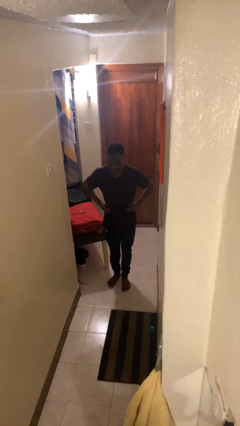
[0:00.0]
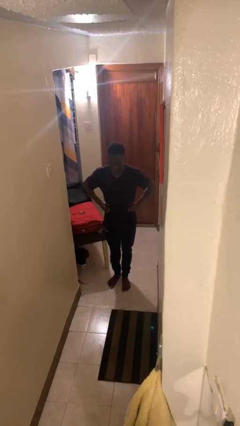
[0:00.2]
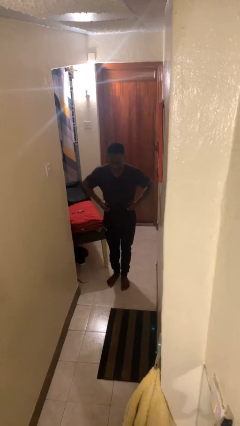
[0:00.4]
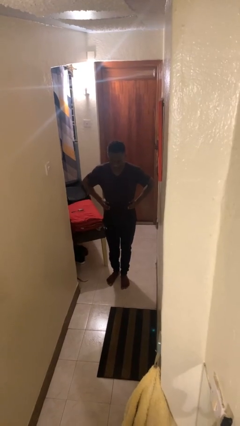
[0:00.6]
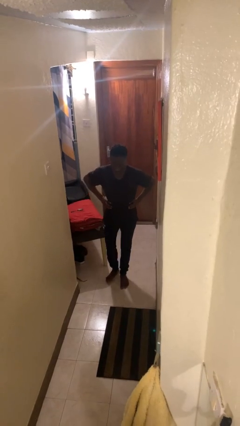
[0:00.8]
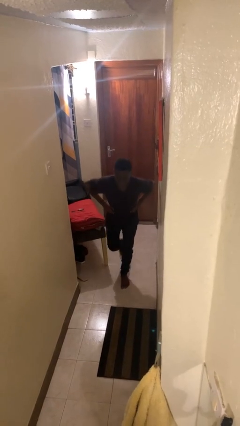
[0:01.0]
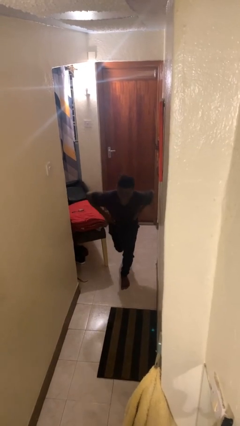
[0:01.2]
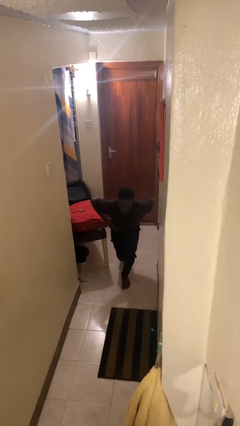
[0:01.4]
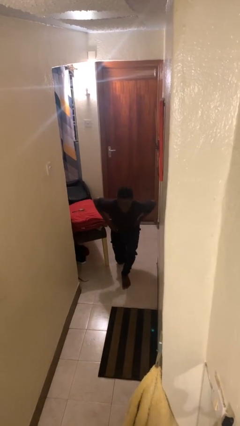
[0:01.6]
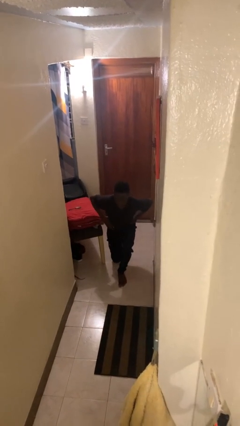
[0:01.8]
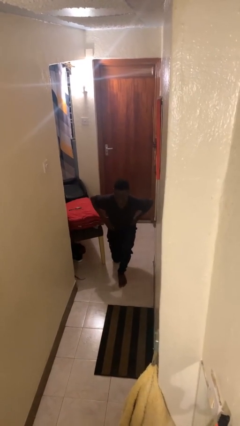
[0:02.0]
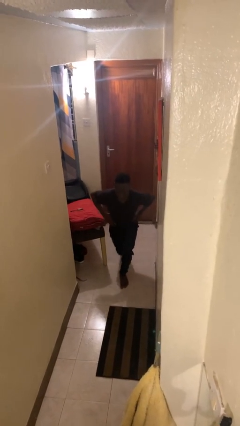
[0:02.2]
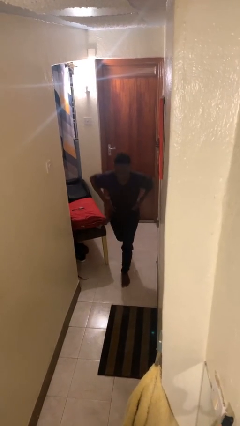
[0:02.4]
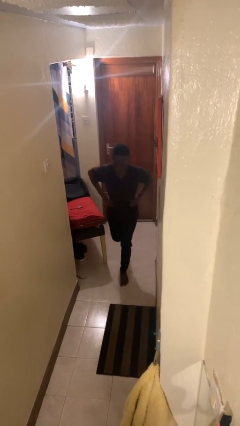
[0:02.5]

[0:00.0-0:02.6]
person exercises with lunges

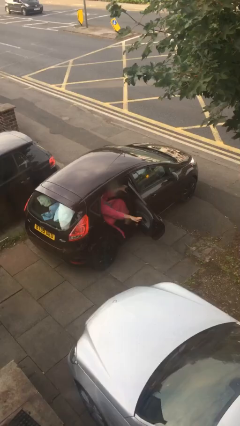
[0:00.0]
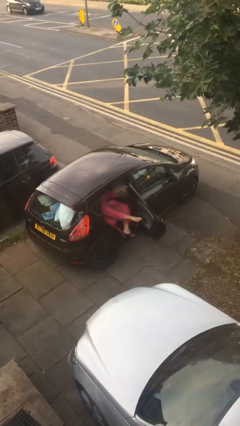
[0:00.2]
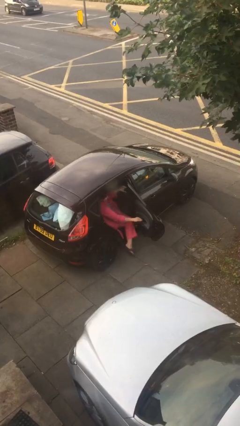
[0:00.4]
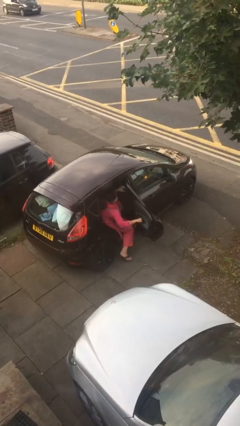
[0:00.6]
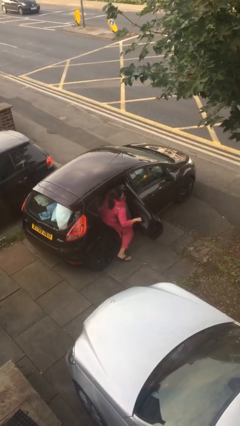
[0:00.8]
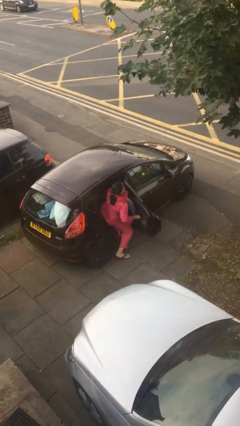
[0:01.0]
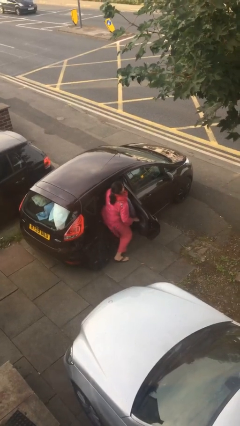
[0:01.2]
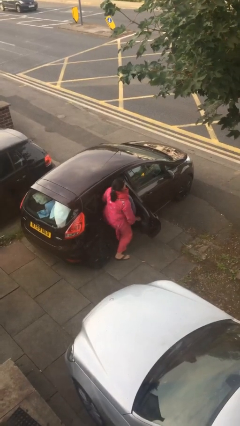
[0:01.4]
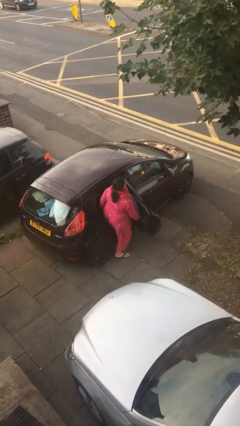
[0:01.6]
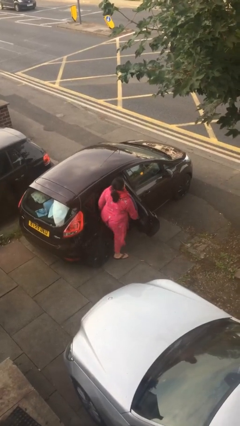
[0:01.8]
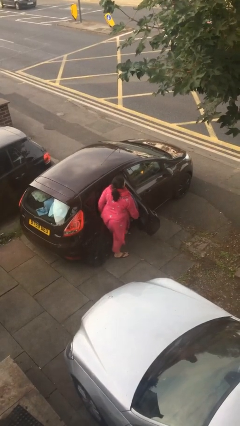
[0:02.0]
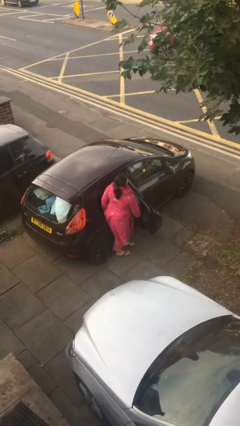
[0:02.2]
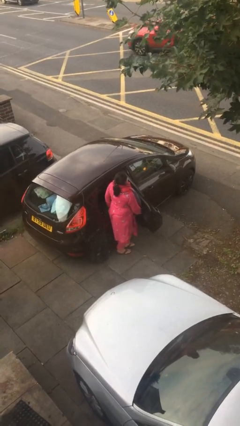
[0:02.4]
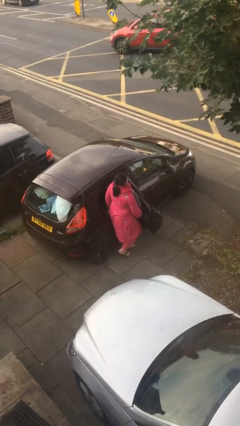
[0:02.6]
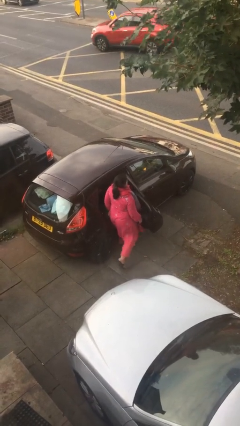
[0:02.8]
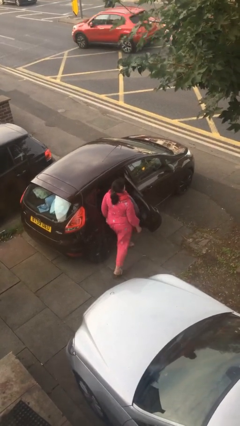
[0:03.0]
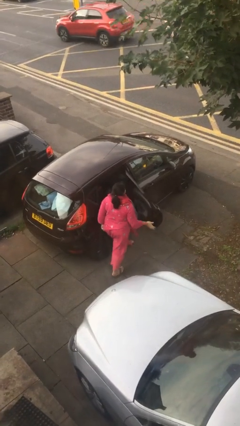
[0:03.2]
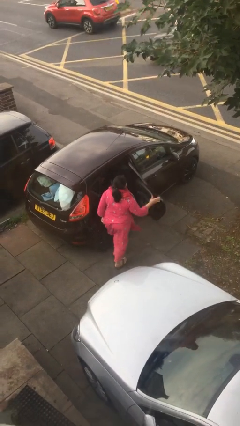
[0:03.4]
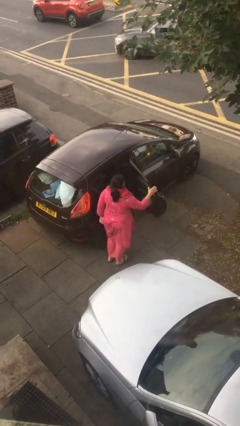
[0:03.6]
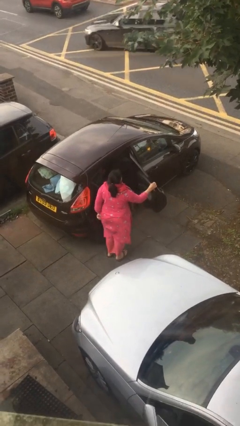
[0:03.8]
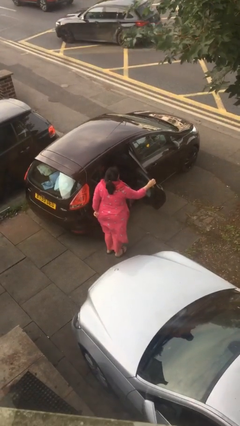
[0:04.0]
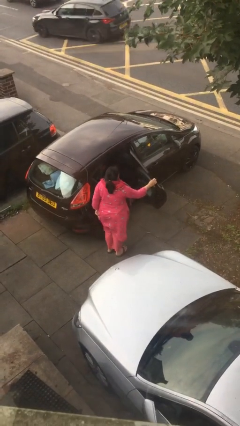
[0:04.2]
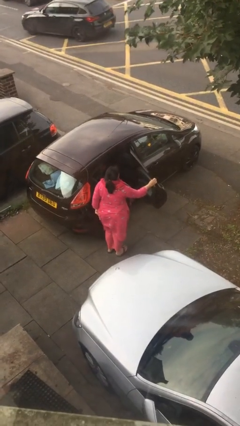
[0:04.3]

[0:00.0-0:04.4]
person exits car

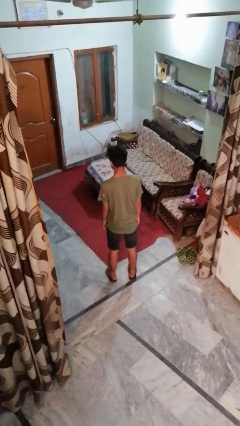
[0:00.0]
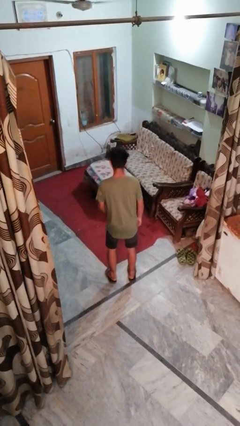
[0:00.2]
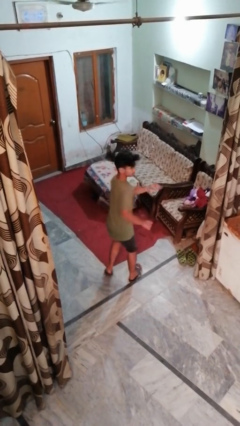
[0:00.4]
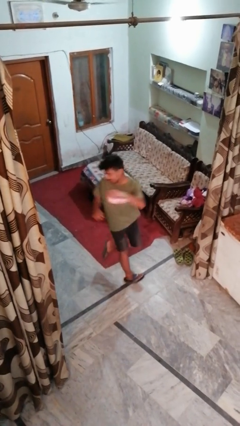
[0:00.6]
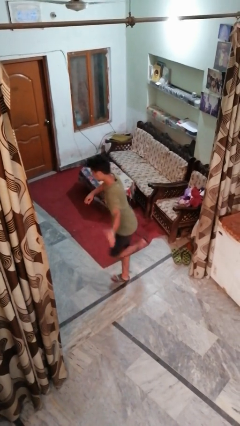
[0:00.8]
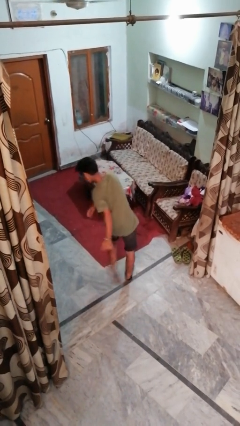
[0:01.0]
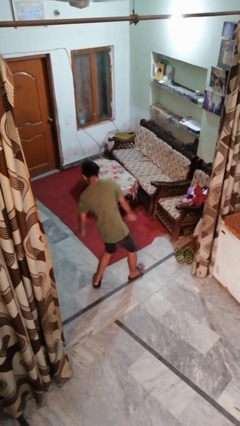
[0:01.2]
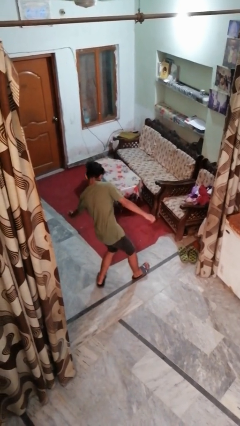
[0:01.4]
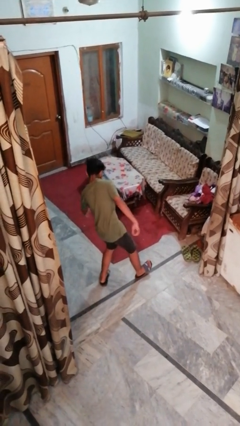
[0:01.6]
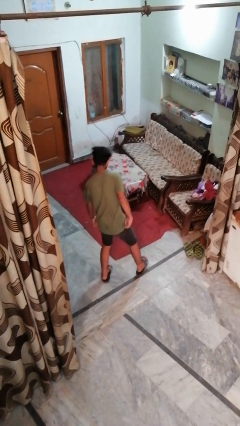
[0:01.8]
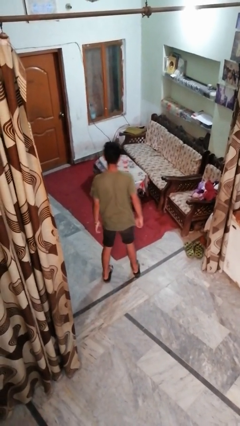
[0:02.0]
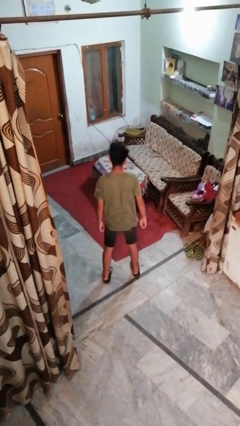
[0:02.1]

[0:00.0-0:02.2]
person twirls

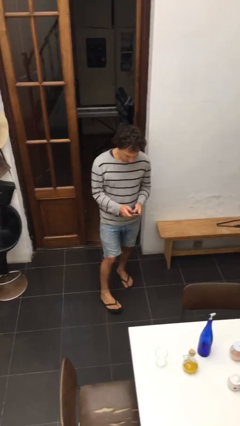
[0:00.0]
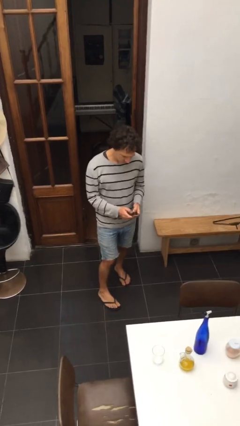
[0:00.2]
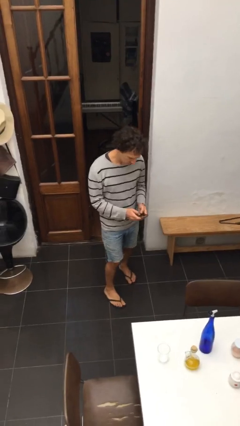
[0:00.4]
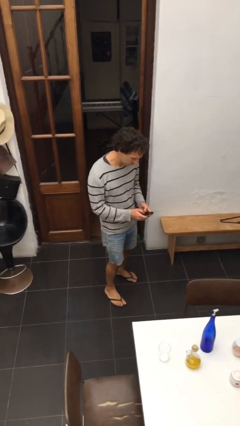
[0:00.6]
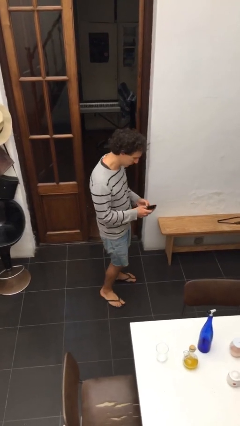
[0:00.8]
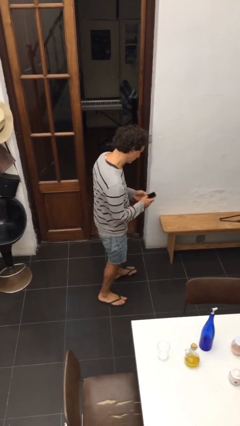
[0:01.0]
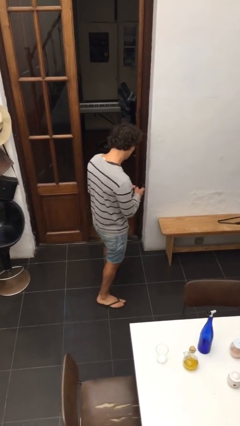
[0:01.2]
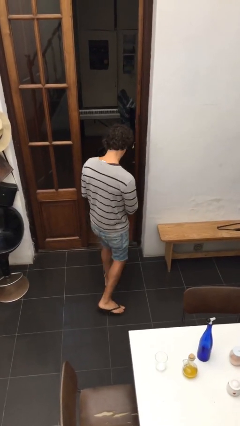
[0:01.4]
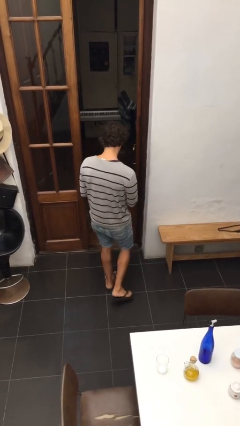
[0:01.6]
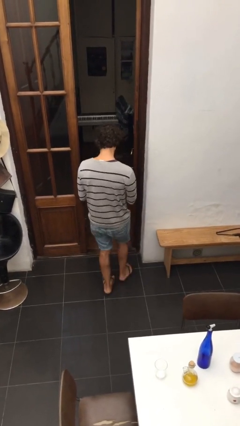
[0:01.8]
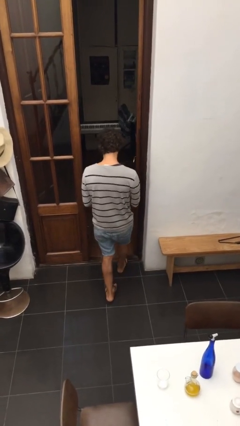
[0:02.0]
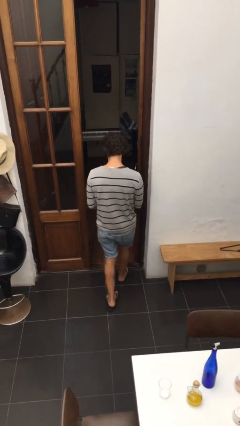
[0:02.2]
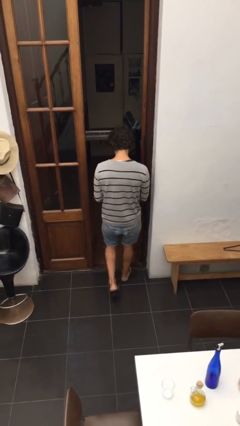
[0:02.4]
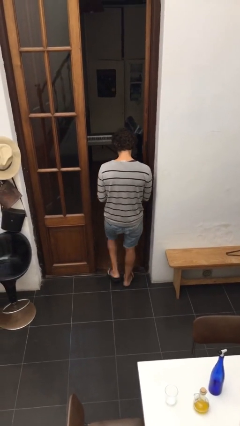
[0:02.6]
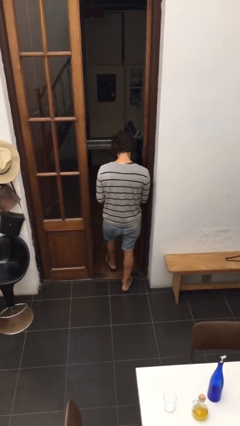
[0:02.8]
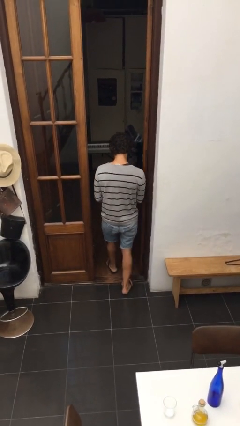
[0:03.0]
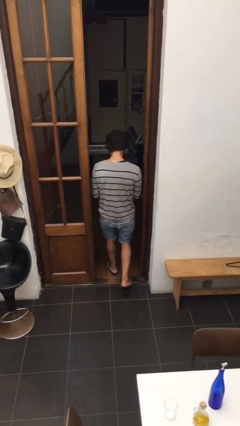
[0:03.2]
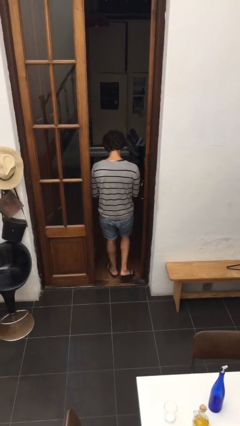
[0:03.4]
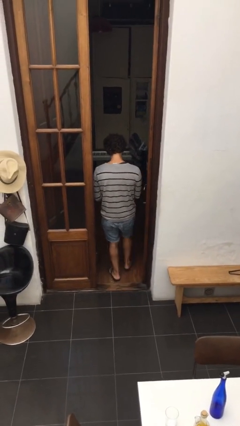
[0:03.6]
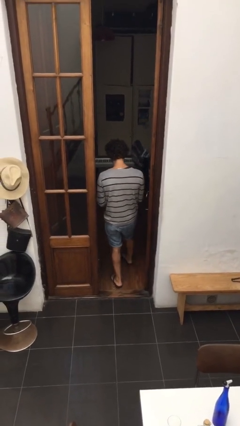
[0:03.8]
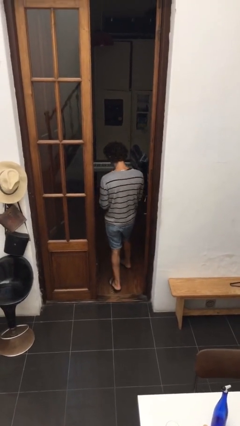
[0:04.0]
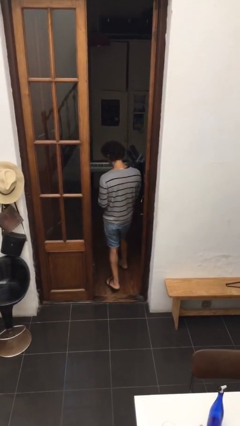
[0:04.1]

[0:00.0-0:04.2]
person exits scene through structure

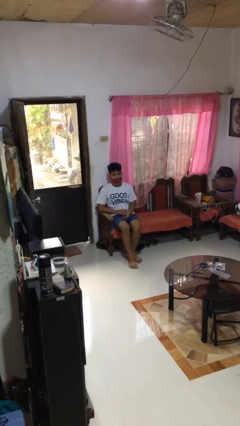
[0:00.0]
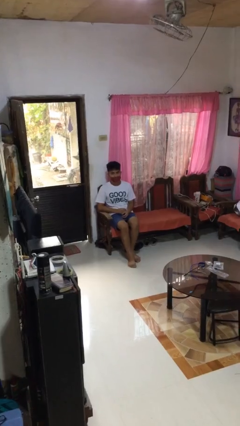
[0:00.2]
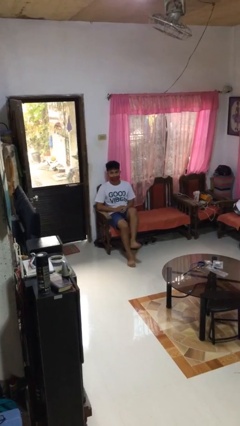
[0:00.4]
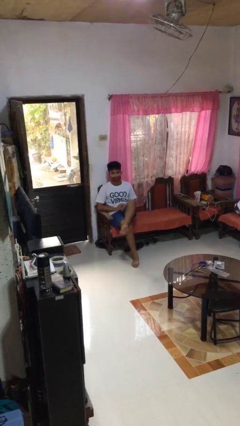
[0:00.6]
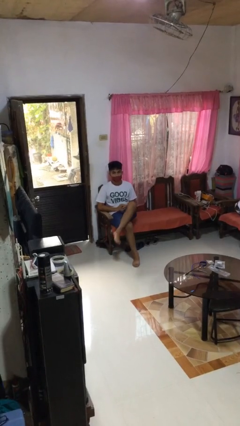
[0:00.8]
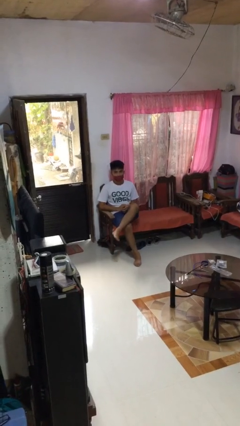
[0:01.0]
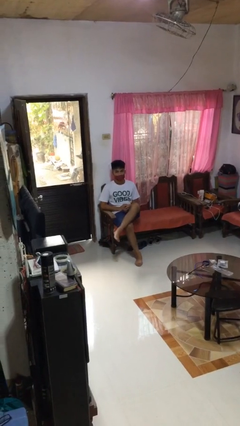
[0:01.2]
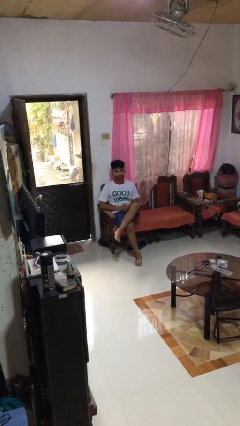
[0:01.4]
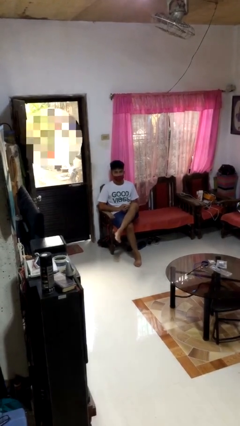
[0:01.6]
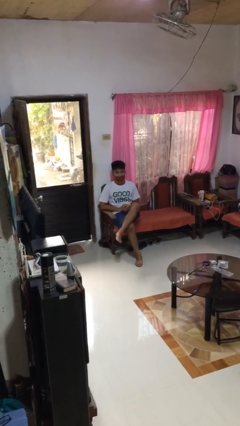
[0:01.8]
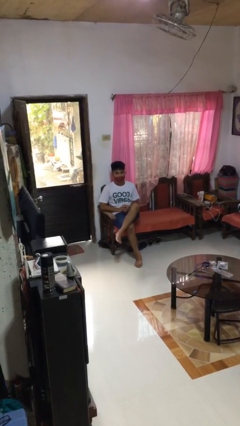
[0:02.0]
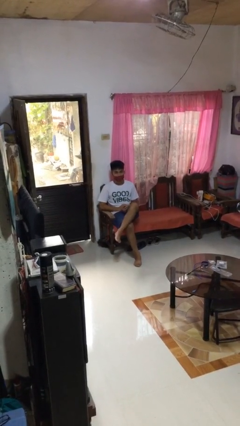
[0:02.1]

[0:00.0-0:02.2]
person crosses legs

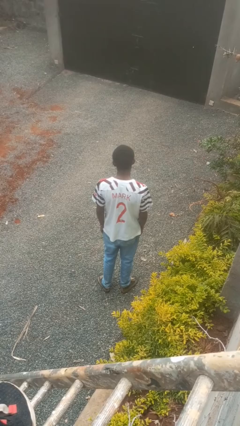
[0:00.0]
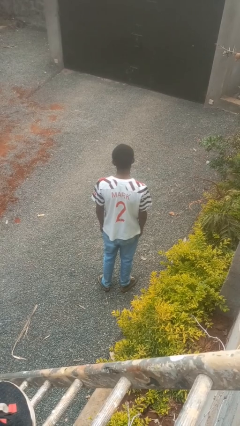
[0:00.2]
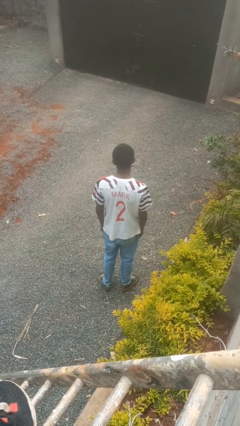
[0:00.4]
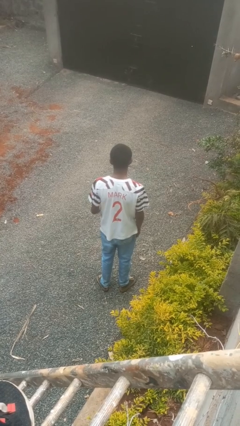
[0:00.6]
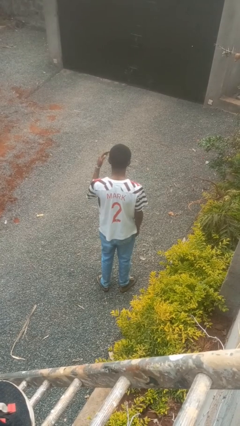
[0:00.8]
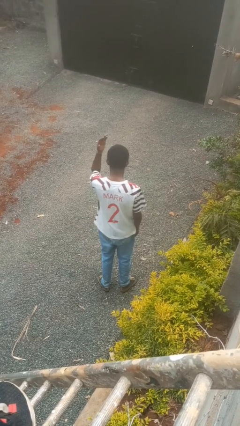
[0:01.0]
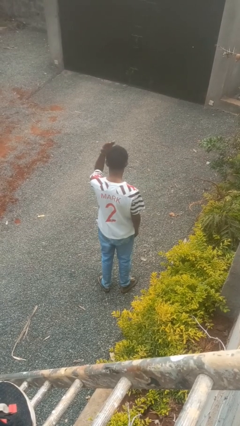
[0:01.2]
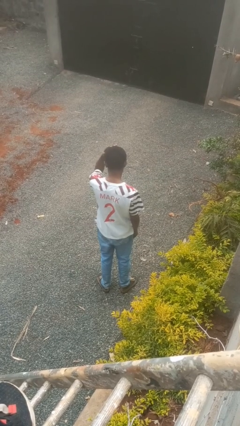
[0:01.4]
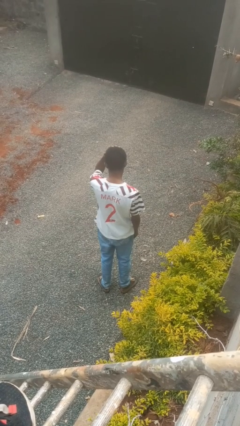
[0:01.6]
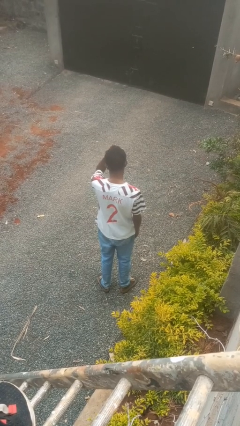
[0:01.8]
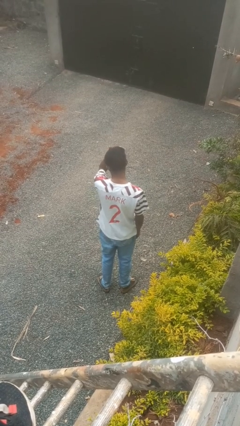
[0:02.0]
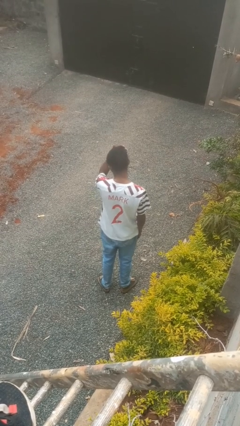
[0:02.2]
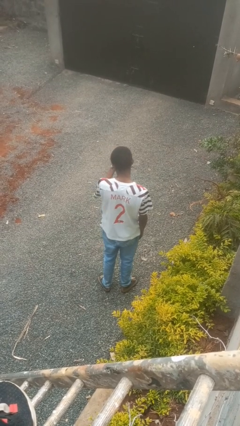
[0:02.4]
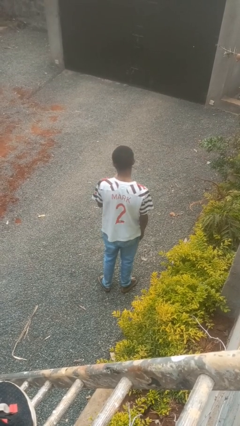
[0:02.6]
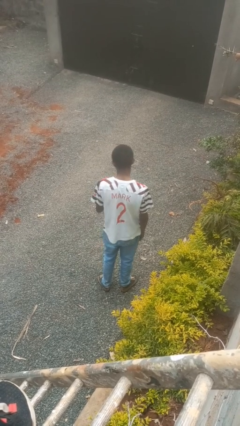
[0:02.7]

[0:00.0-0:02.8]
person pats head
